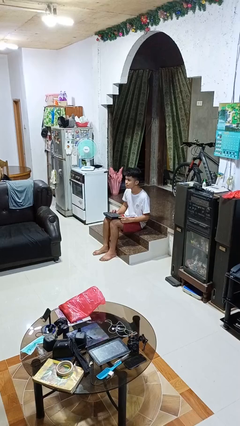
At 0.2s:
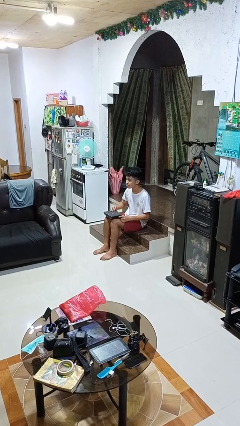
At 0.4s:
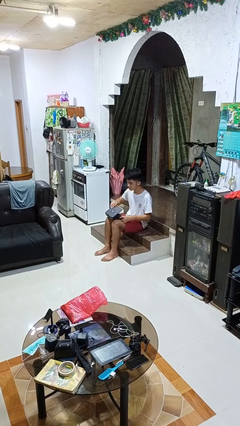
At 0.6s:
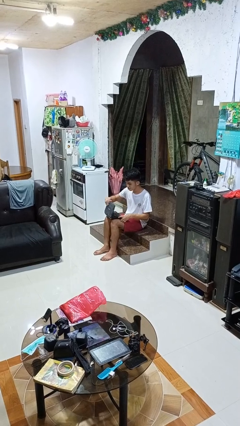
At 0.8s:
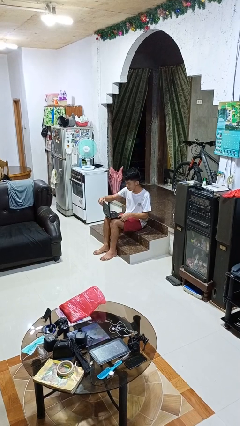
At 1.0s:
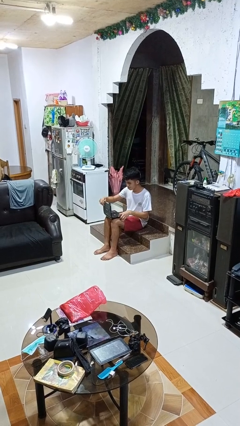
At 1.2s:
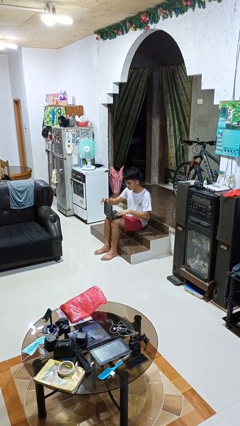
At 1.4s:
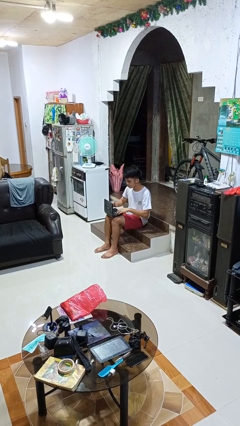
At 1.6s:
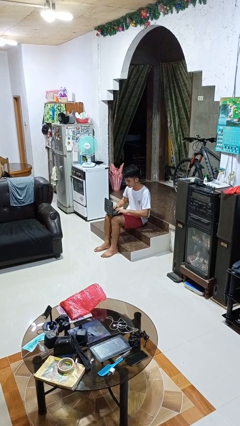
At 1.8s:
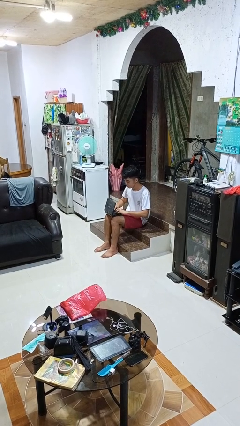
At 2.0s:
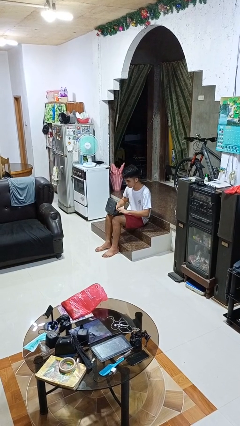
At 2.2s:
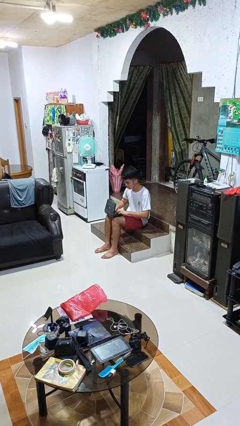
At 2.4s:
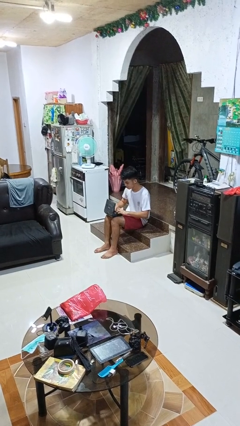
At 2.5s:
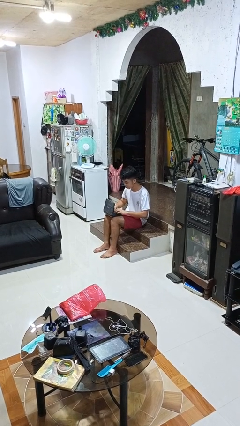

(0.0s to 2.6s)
person opens laptop

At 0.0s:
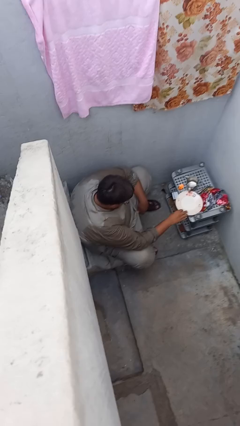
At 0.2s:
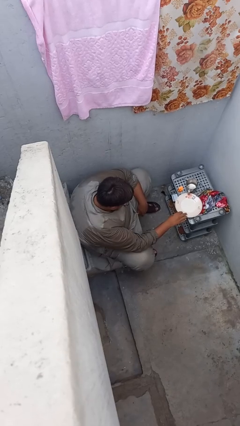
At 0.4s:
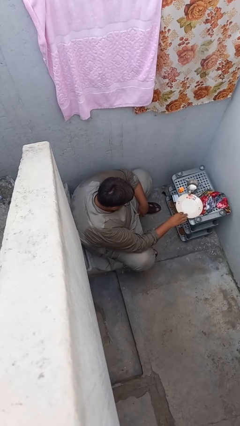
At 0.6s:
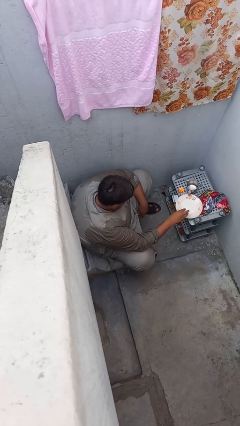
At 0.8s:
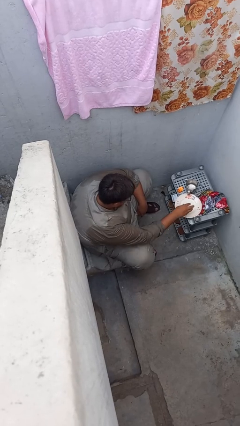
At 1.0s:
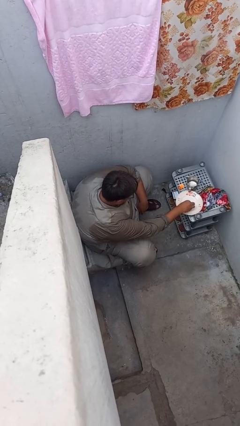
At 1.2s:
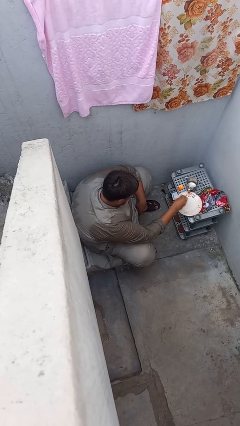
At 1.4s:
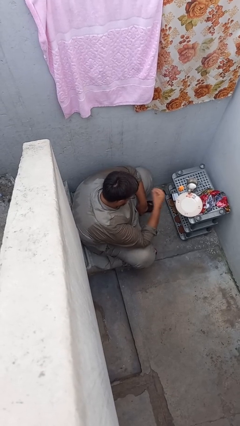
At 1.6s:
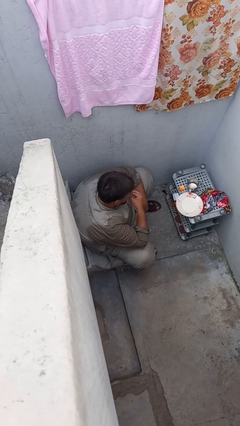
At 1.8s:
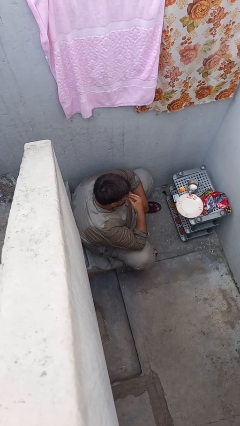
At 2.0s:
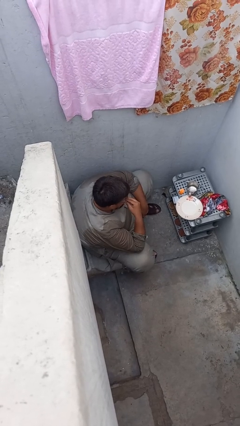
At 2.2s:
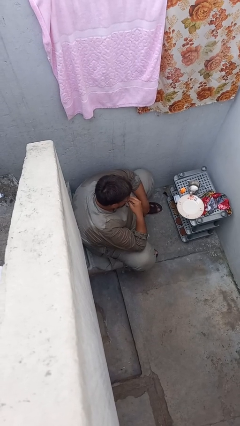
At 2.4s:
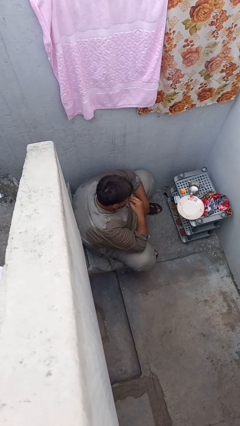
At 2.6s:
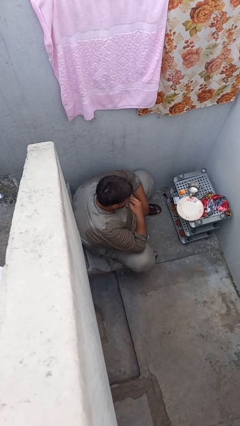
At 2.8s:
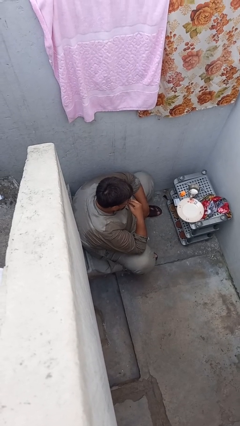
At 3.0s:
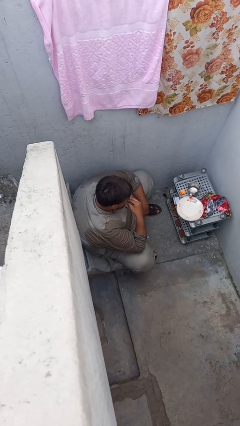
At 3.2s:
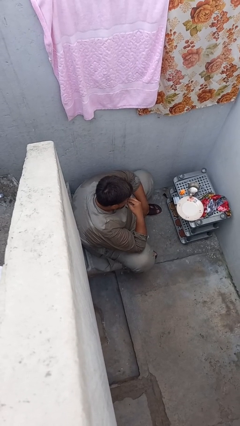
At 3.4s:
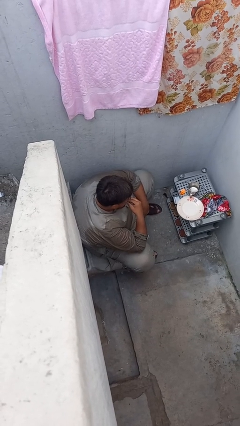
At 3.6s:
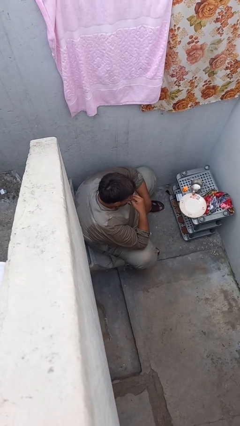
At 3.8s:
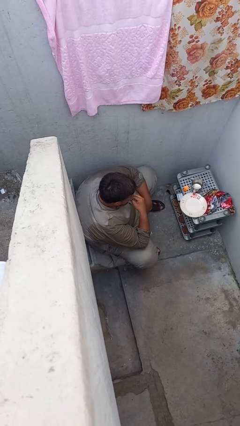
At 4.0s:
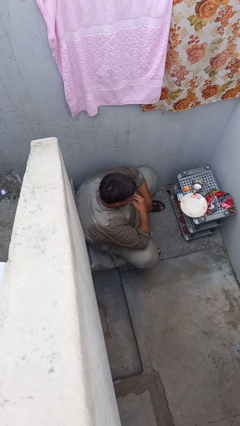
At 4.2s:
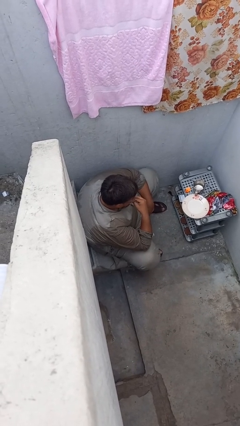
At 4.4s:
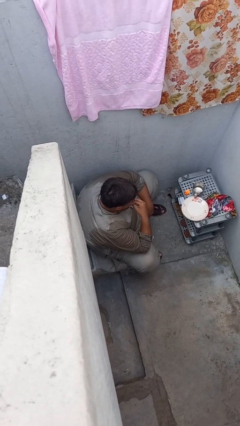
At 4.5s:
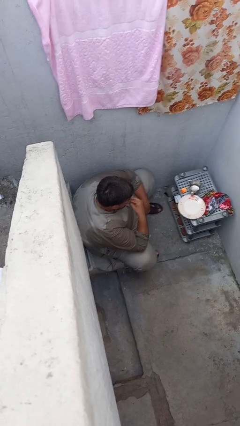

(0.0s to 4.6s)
person eats with hands

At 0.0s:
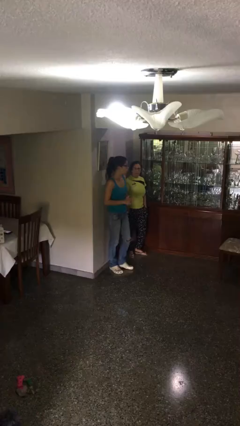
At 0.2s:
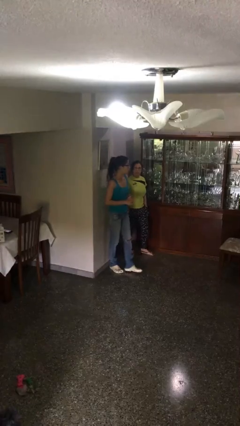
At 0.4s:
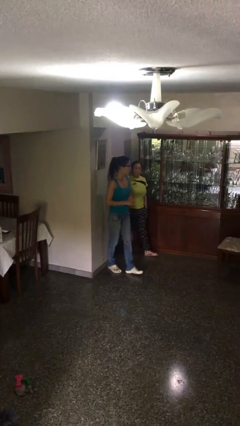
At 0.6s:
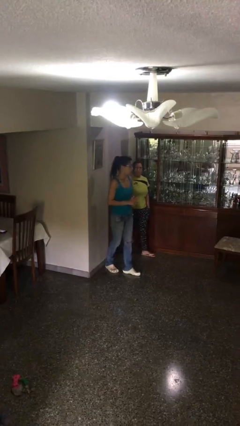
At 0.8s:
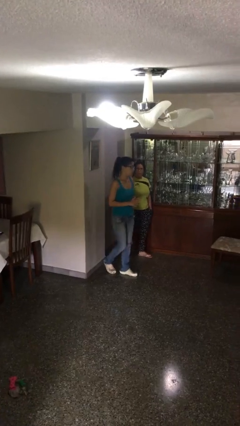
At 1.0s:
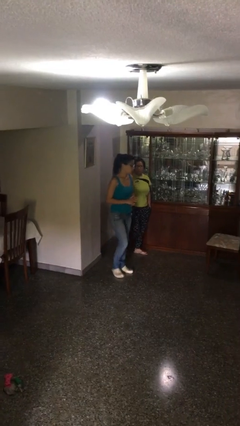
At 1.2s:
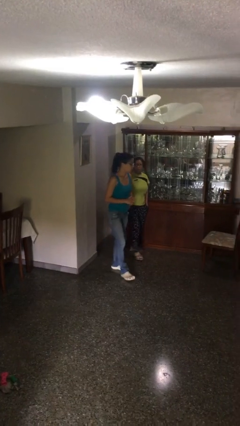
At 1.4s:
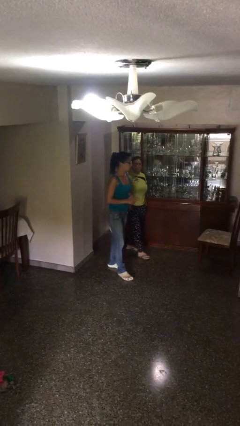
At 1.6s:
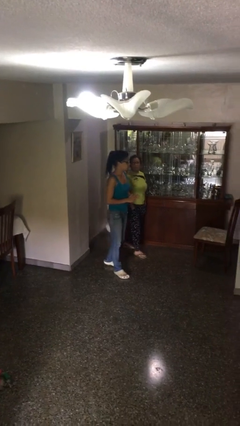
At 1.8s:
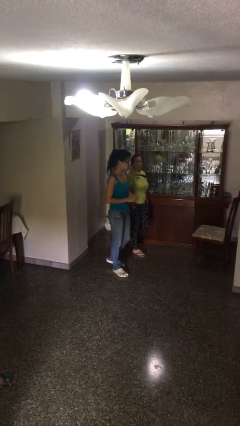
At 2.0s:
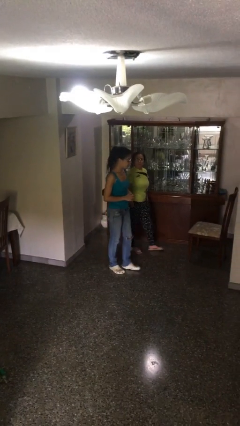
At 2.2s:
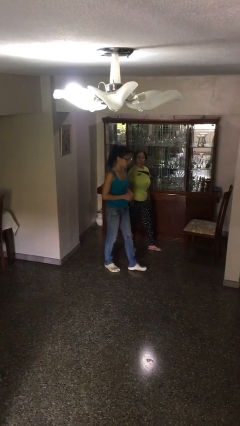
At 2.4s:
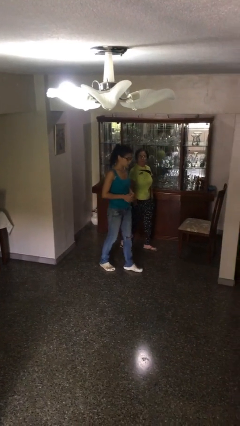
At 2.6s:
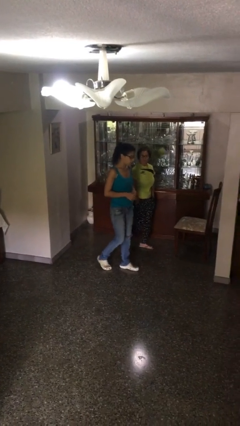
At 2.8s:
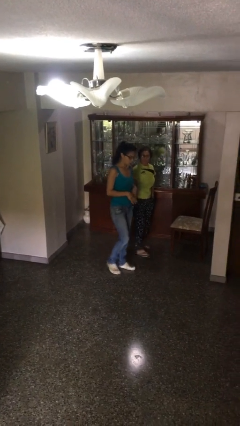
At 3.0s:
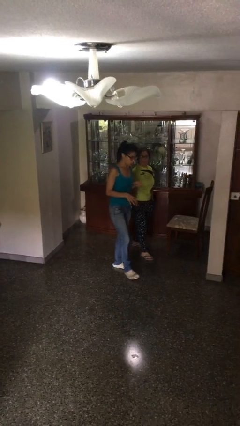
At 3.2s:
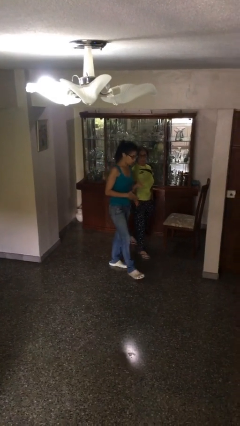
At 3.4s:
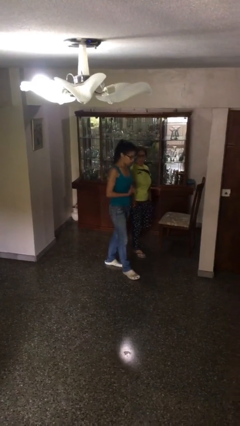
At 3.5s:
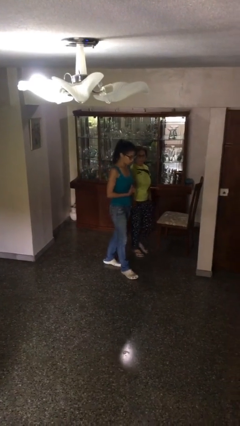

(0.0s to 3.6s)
person talks to person

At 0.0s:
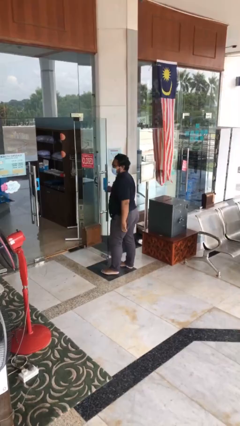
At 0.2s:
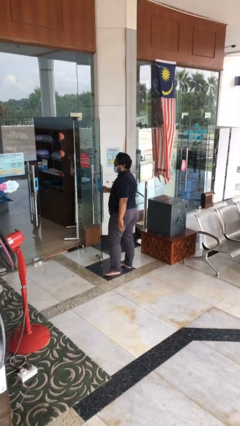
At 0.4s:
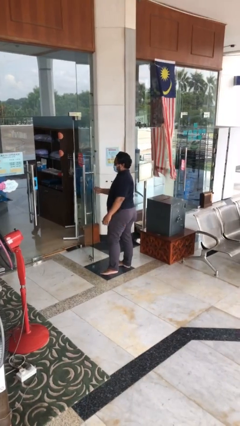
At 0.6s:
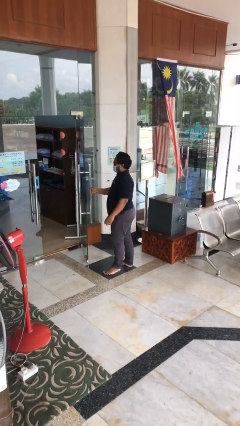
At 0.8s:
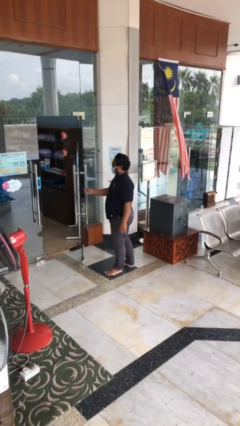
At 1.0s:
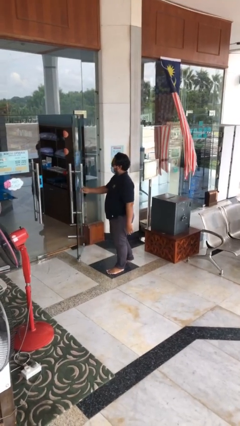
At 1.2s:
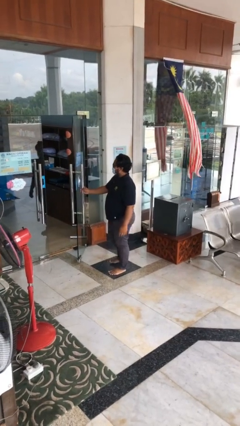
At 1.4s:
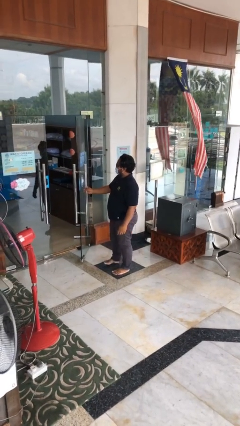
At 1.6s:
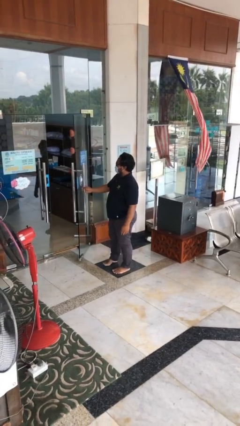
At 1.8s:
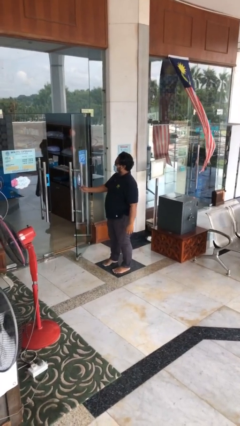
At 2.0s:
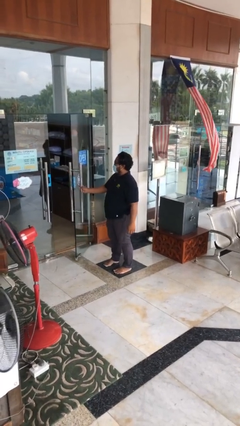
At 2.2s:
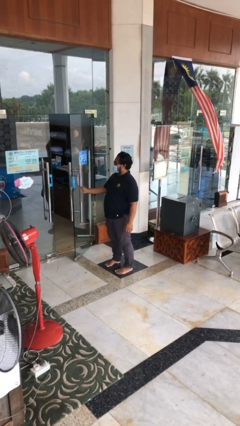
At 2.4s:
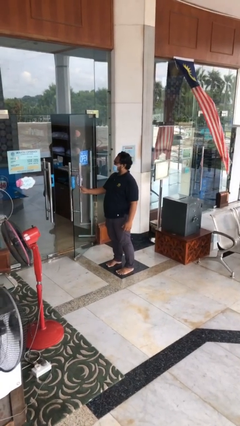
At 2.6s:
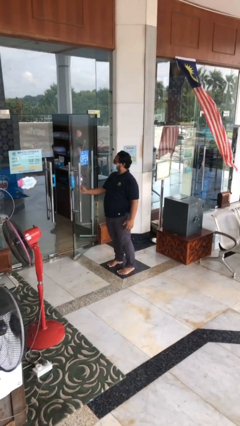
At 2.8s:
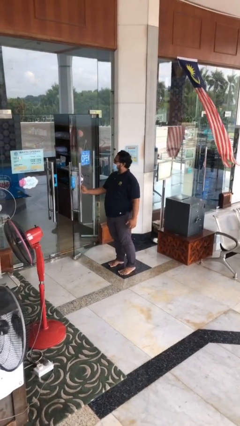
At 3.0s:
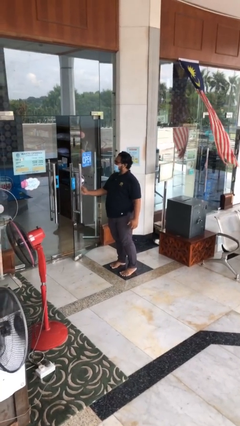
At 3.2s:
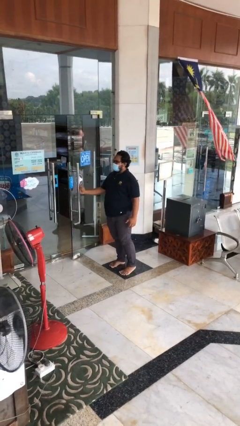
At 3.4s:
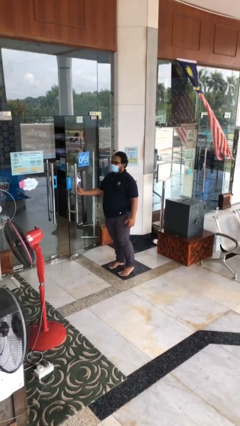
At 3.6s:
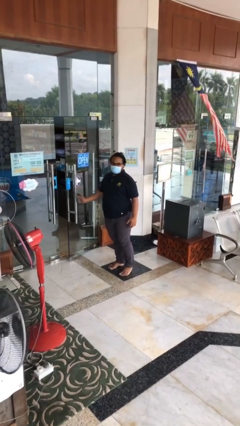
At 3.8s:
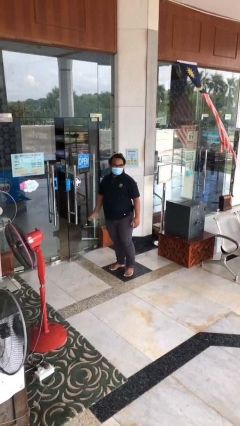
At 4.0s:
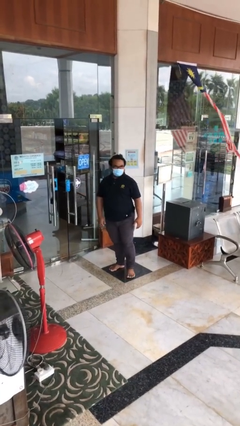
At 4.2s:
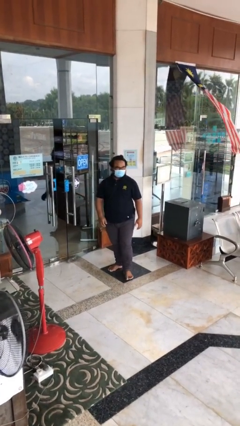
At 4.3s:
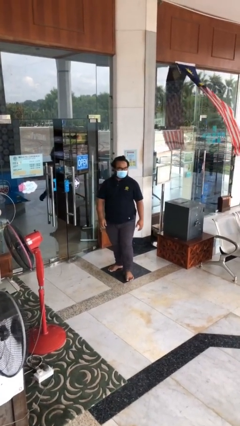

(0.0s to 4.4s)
person closes facility door

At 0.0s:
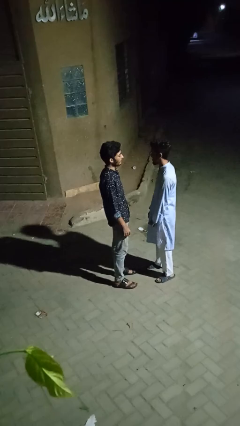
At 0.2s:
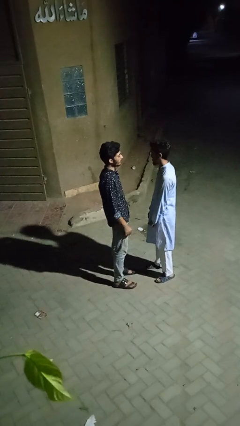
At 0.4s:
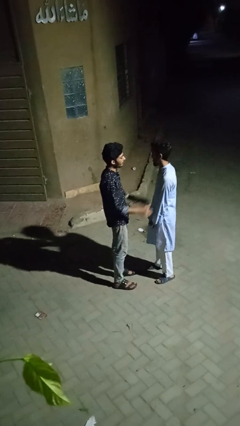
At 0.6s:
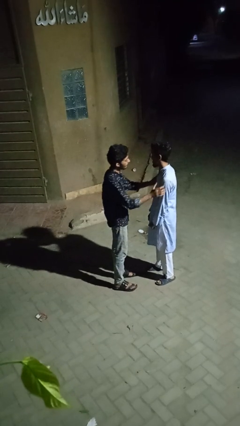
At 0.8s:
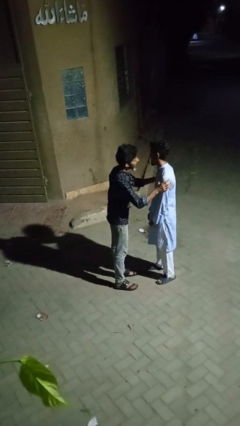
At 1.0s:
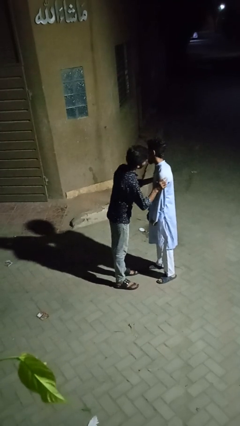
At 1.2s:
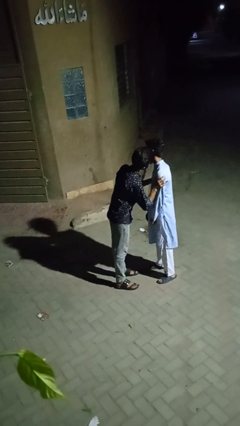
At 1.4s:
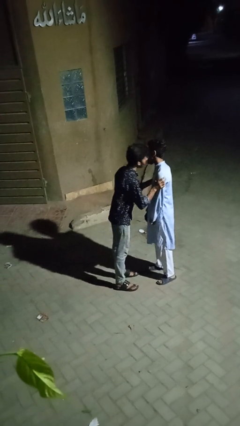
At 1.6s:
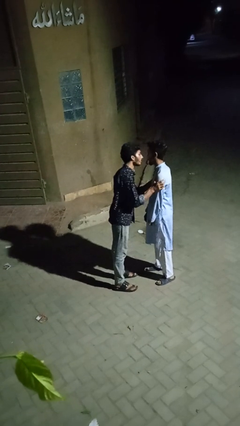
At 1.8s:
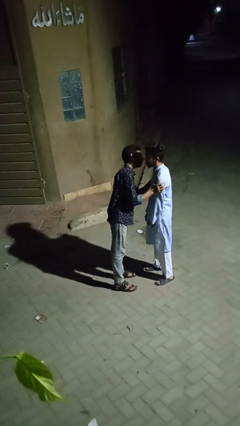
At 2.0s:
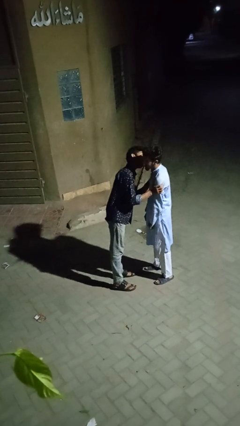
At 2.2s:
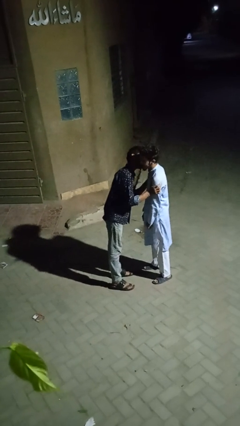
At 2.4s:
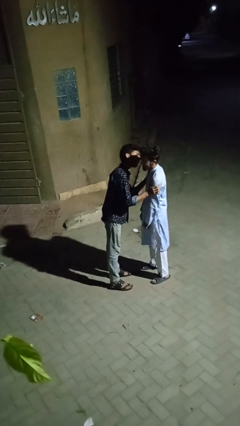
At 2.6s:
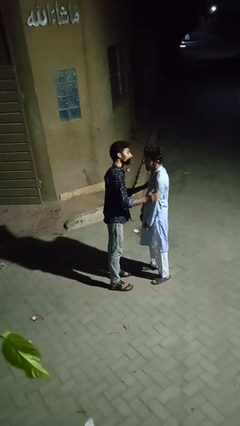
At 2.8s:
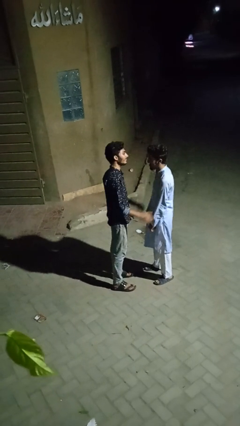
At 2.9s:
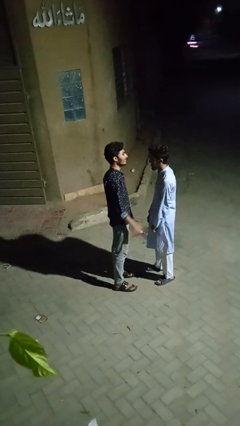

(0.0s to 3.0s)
person kisses cheek of person
